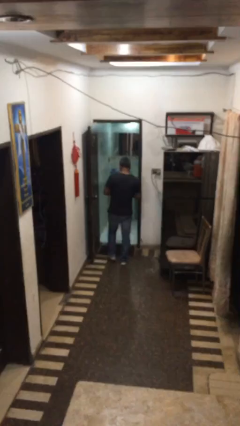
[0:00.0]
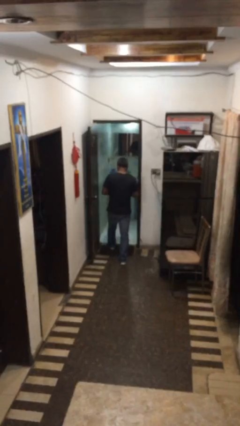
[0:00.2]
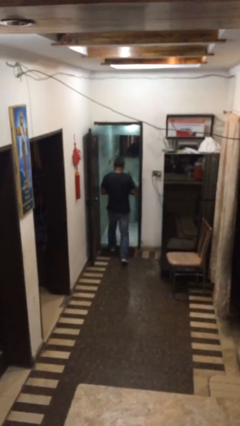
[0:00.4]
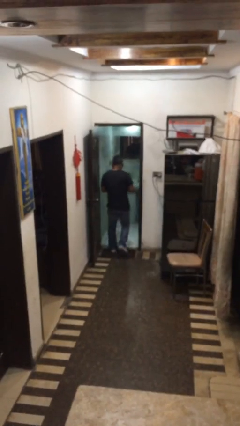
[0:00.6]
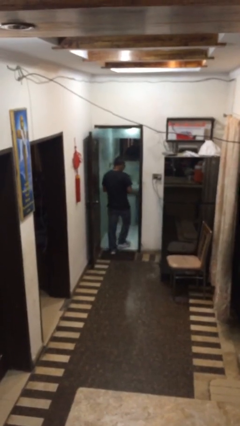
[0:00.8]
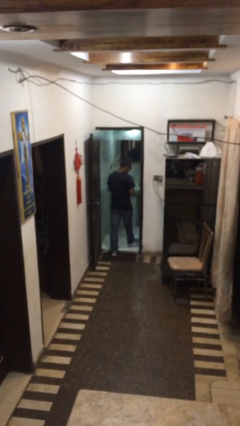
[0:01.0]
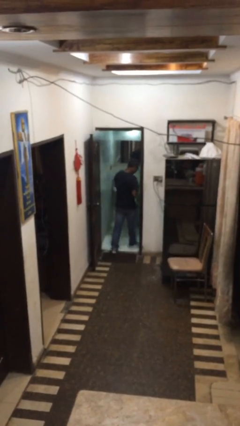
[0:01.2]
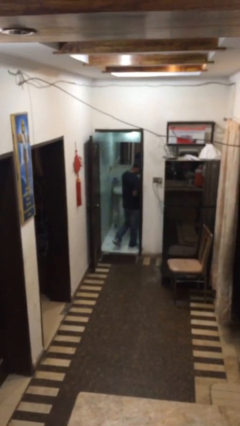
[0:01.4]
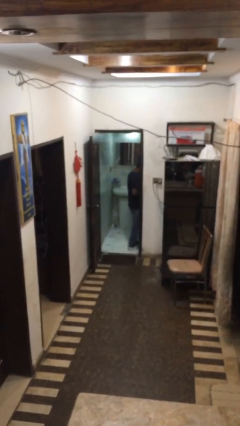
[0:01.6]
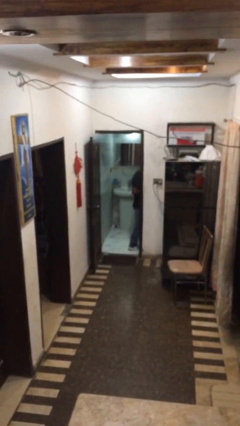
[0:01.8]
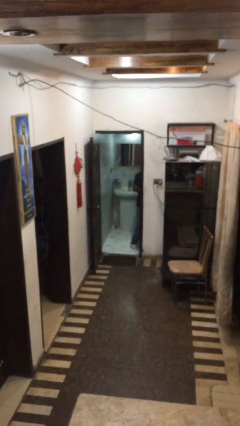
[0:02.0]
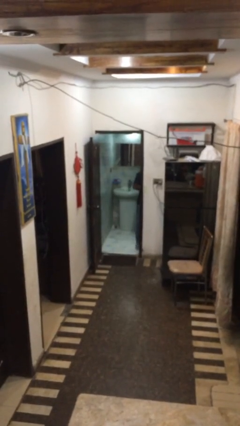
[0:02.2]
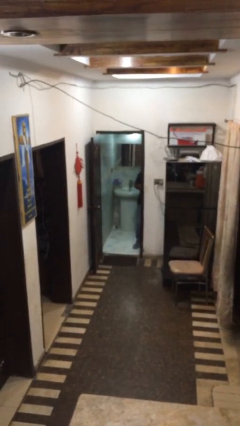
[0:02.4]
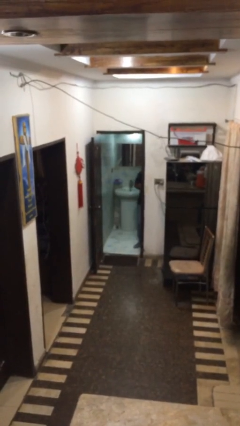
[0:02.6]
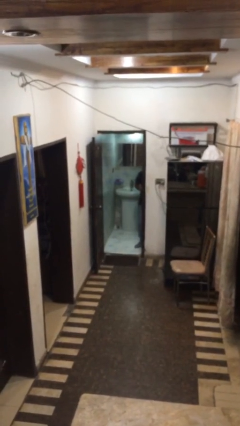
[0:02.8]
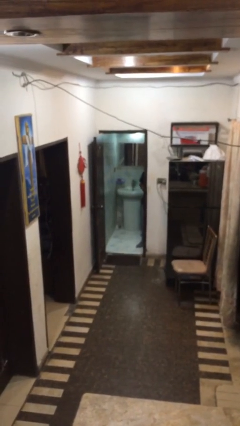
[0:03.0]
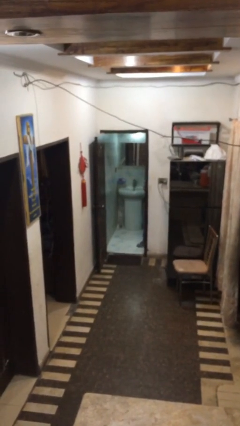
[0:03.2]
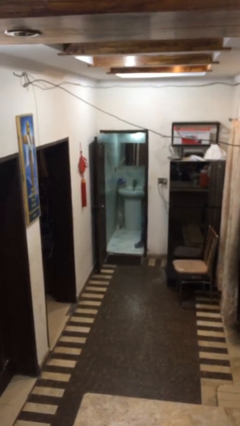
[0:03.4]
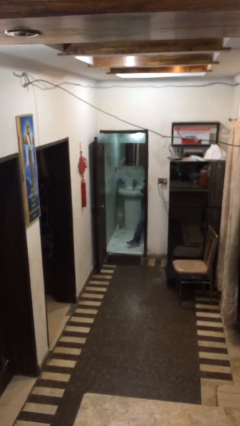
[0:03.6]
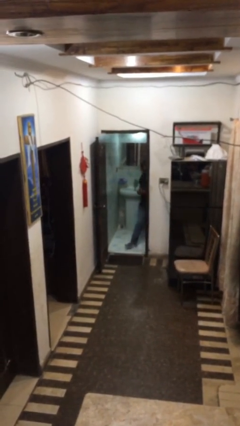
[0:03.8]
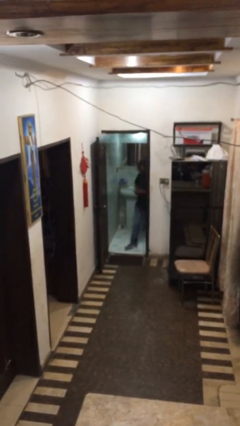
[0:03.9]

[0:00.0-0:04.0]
person exits scene through structure

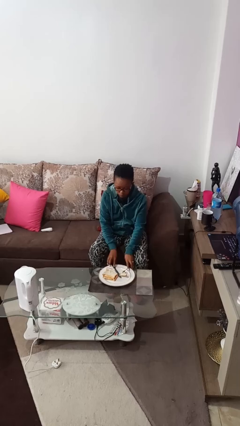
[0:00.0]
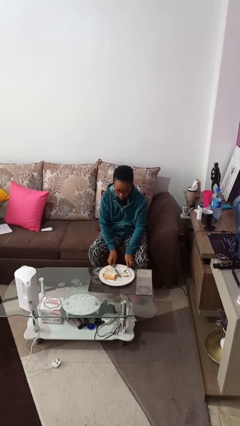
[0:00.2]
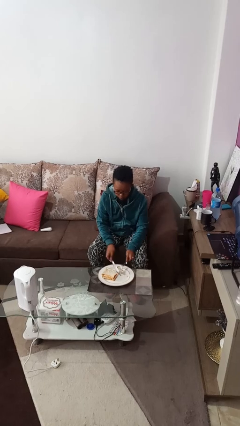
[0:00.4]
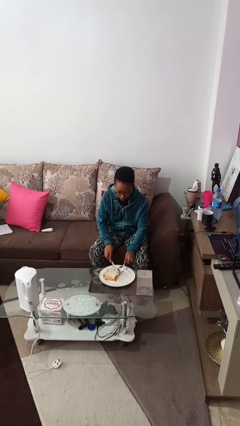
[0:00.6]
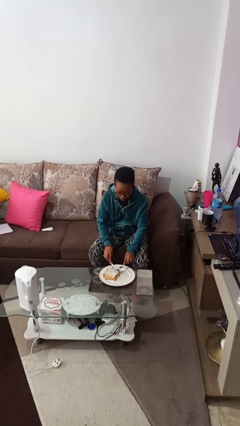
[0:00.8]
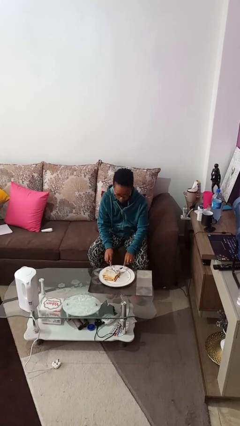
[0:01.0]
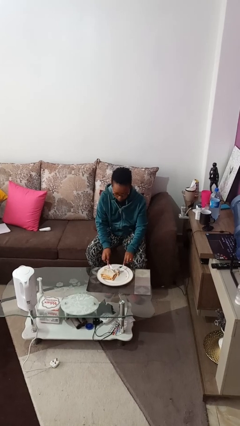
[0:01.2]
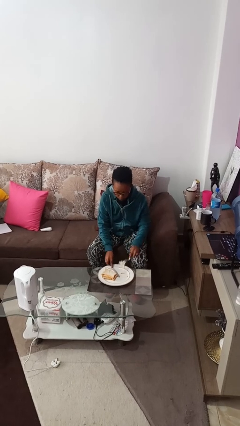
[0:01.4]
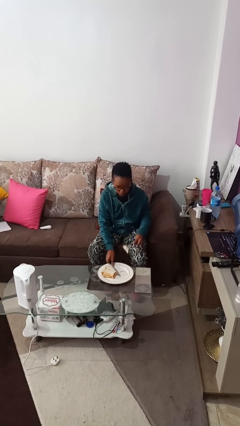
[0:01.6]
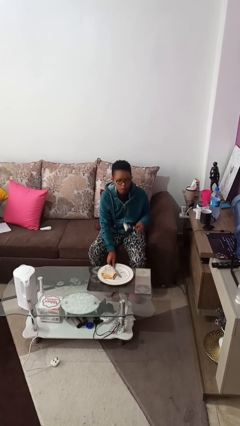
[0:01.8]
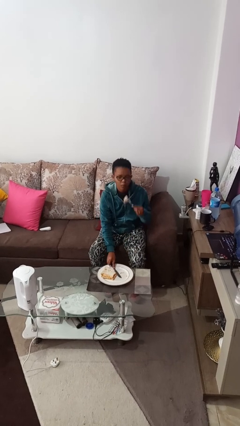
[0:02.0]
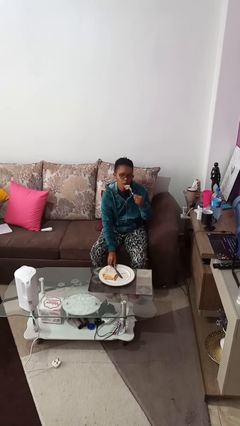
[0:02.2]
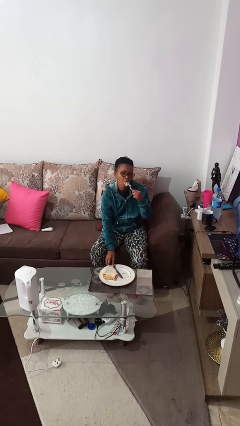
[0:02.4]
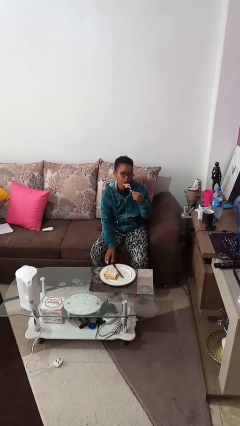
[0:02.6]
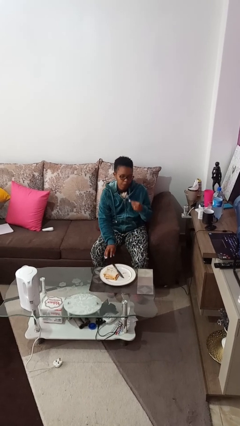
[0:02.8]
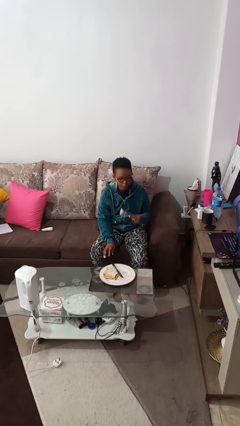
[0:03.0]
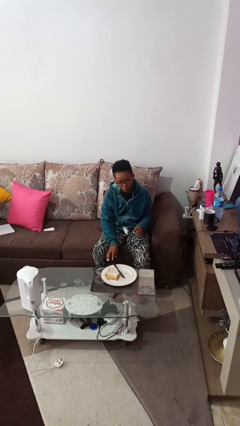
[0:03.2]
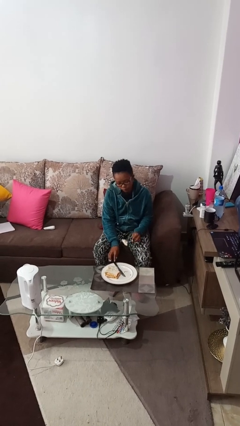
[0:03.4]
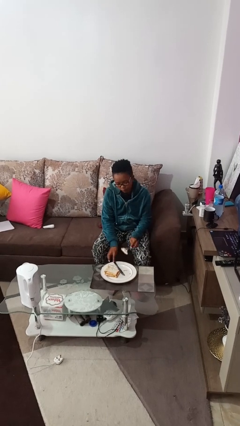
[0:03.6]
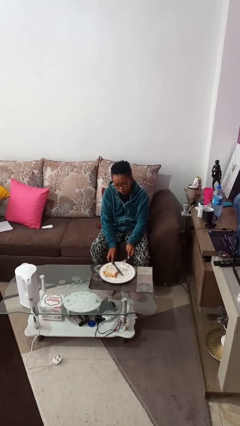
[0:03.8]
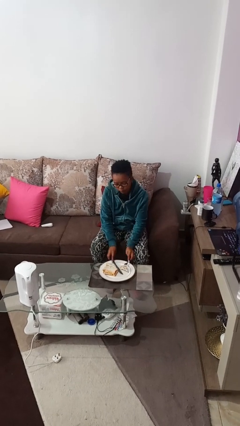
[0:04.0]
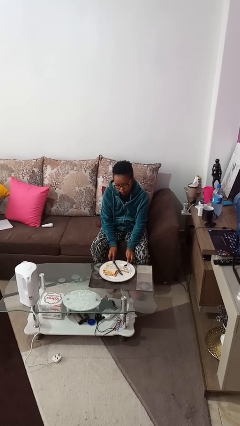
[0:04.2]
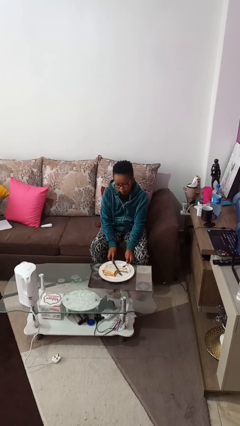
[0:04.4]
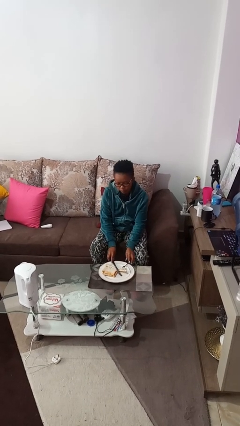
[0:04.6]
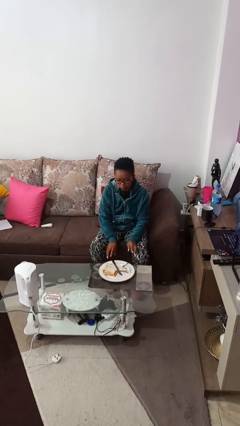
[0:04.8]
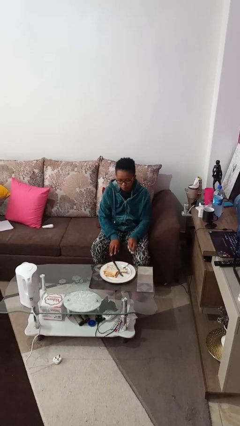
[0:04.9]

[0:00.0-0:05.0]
person eats with utensil

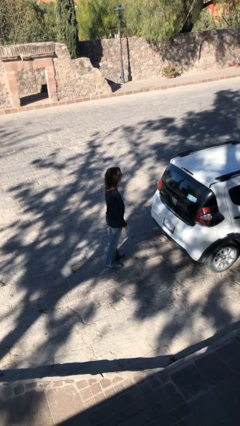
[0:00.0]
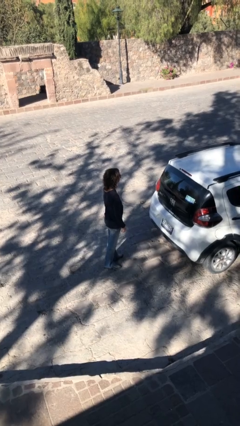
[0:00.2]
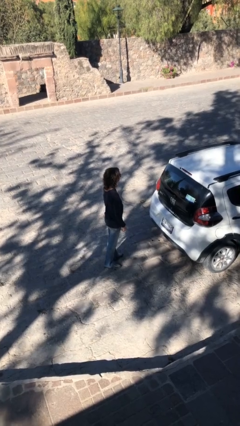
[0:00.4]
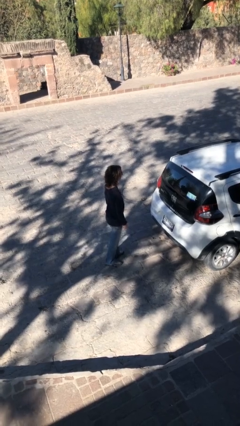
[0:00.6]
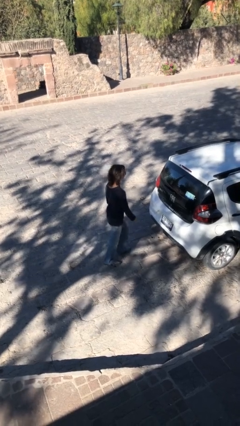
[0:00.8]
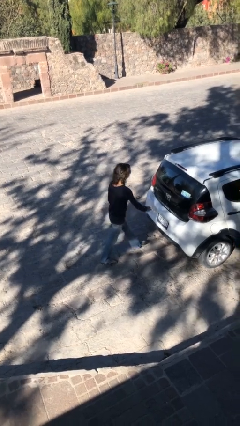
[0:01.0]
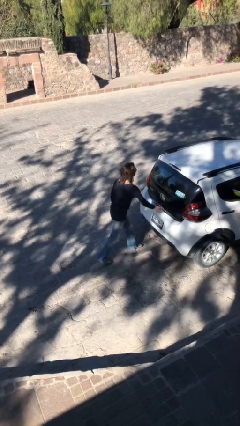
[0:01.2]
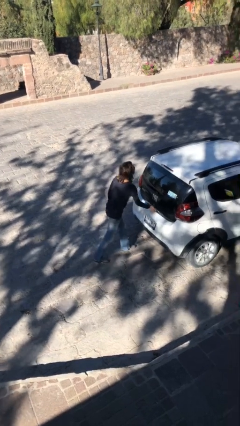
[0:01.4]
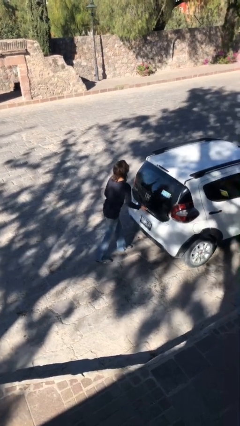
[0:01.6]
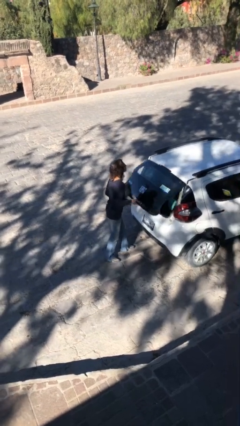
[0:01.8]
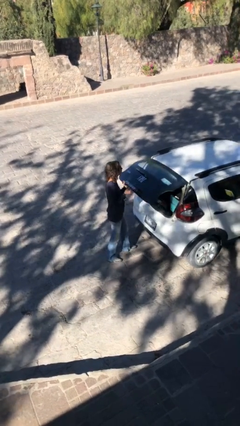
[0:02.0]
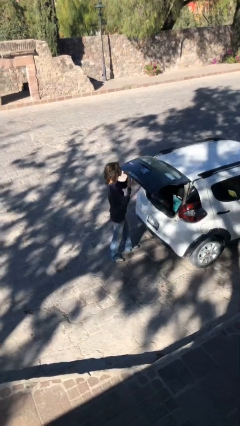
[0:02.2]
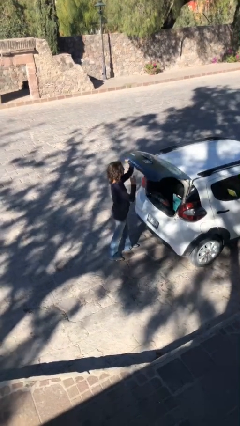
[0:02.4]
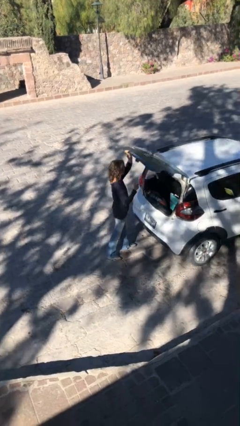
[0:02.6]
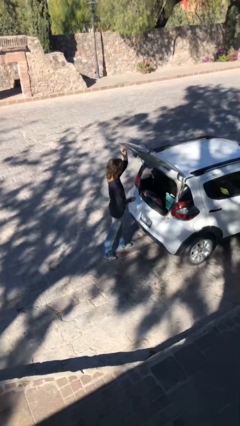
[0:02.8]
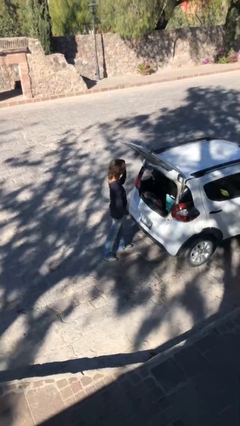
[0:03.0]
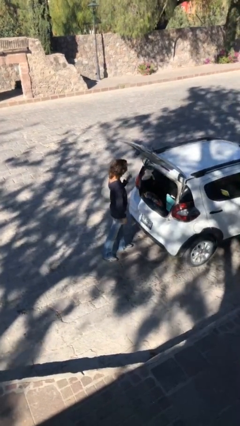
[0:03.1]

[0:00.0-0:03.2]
person opens car trunk

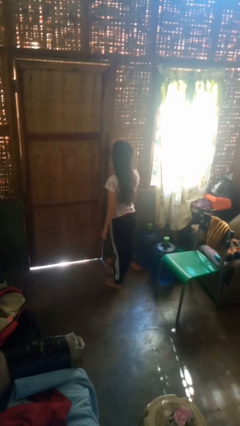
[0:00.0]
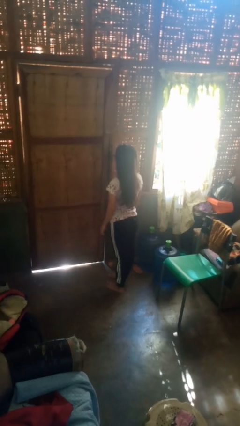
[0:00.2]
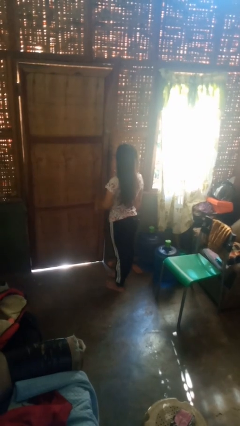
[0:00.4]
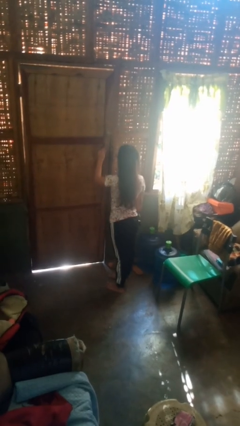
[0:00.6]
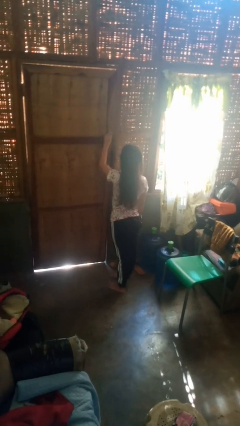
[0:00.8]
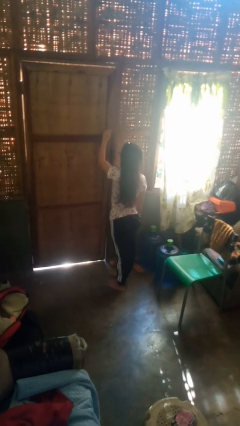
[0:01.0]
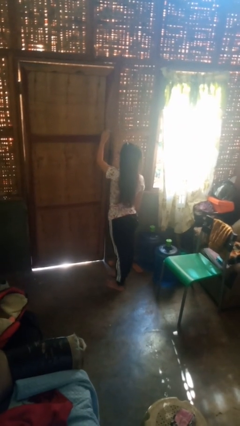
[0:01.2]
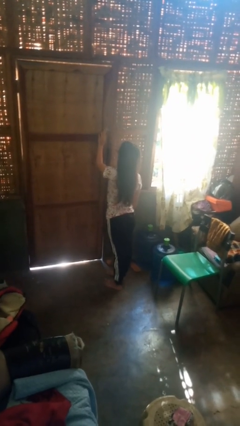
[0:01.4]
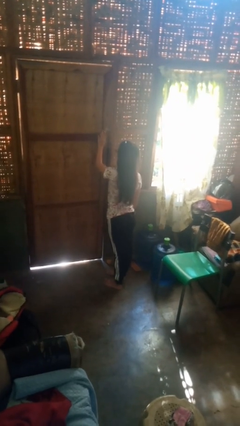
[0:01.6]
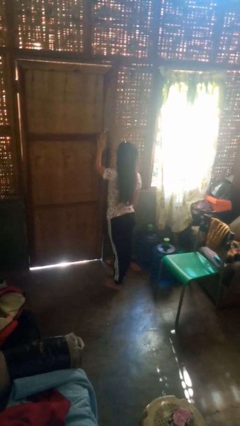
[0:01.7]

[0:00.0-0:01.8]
person unlocks door with keys

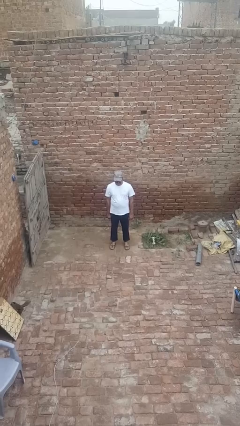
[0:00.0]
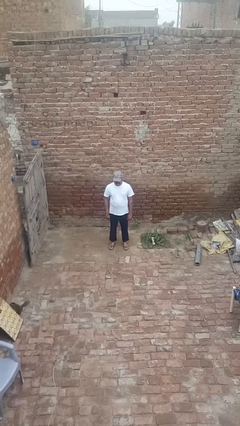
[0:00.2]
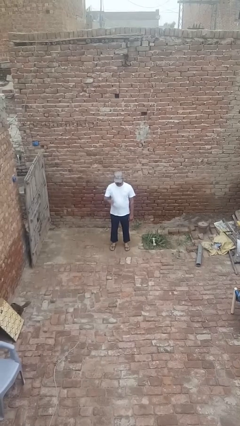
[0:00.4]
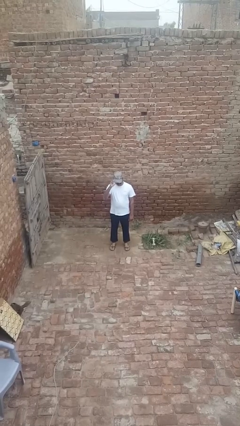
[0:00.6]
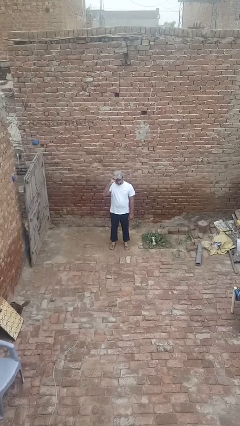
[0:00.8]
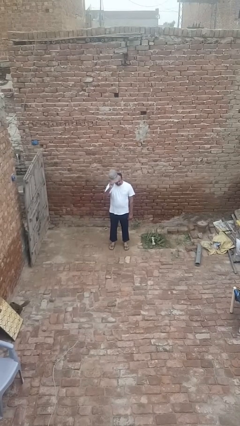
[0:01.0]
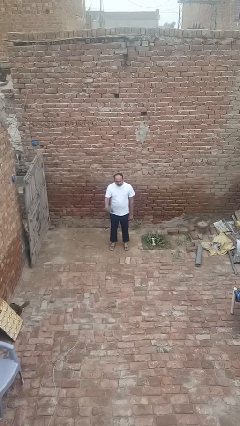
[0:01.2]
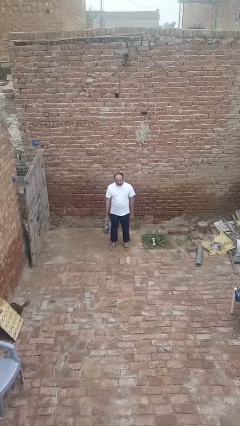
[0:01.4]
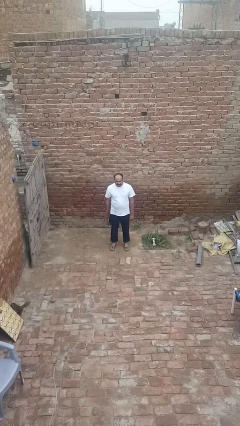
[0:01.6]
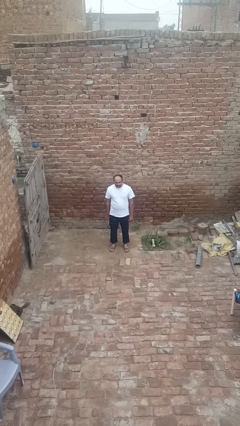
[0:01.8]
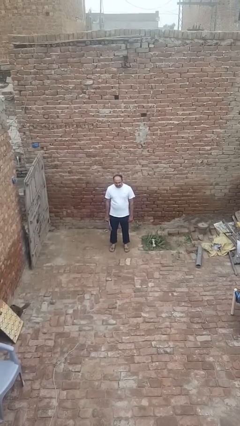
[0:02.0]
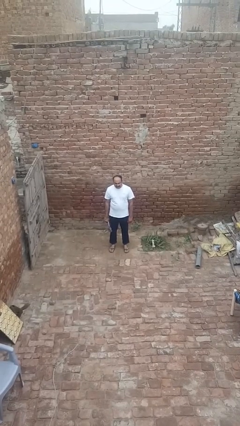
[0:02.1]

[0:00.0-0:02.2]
person takes off hat

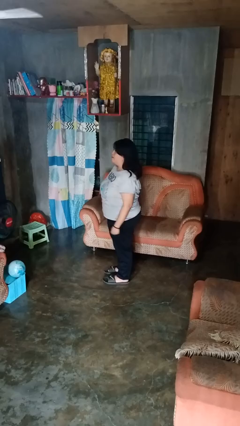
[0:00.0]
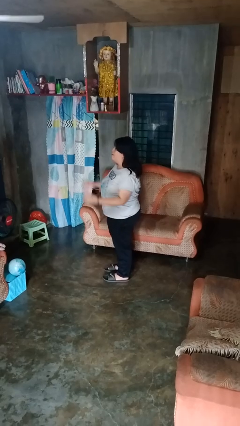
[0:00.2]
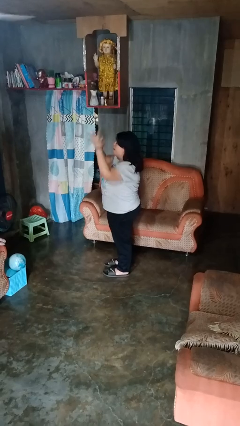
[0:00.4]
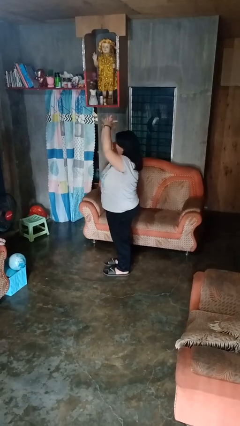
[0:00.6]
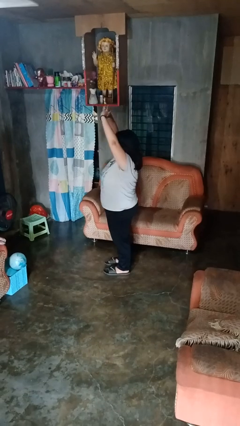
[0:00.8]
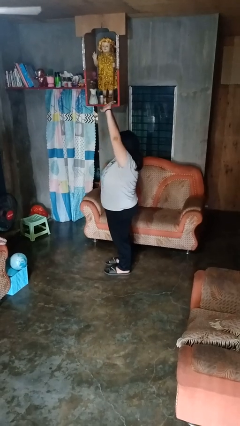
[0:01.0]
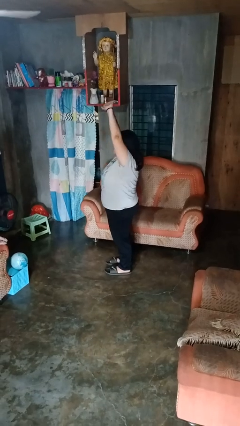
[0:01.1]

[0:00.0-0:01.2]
person stretches arms over head
